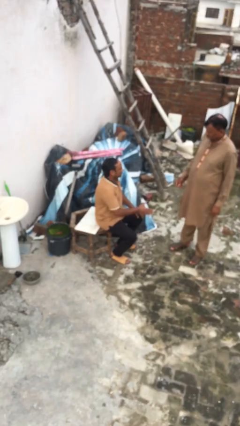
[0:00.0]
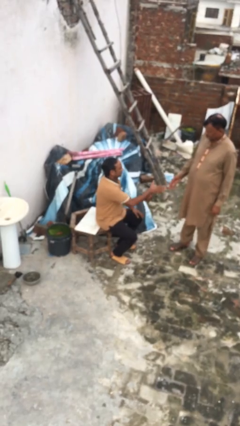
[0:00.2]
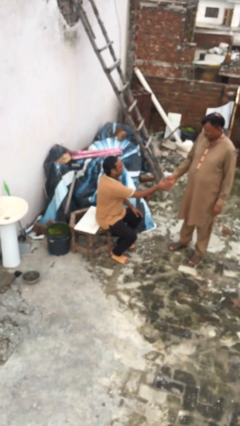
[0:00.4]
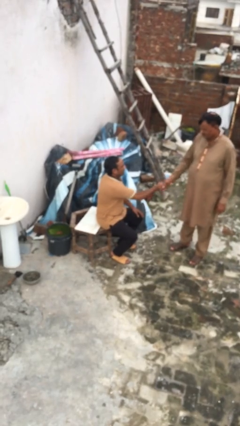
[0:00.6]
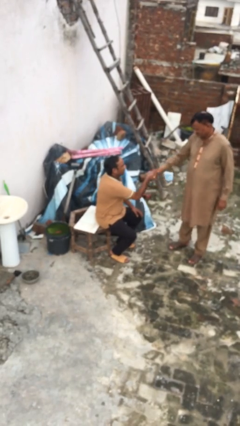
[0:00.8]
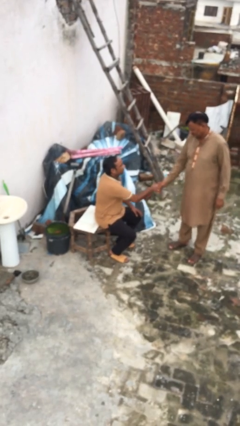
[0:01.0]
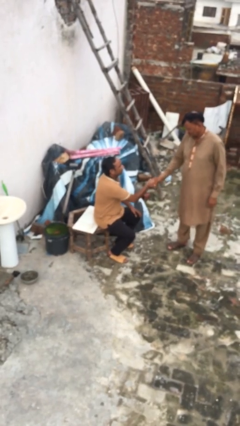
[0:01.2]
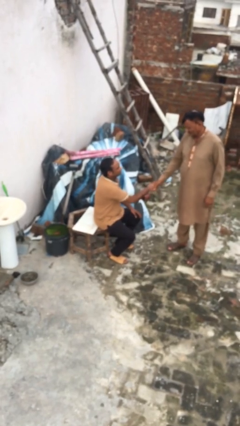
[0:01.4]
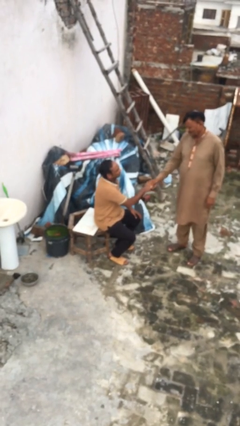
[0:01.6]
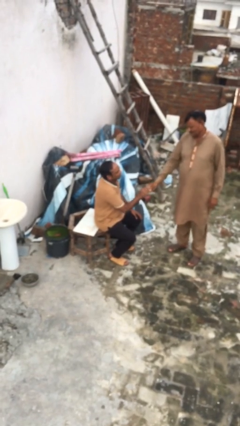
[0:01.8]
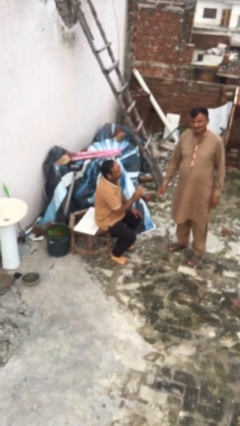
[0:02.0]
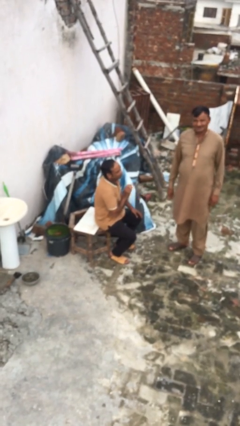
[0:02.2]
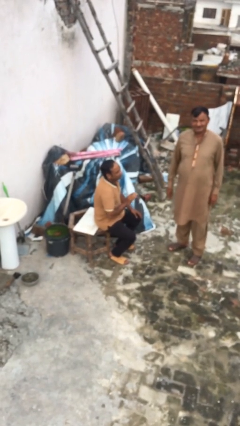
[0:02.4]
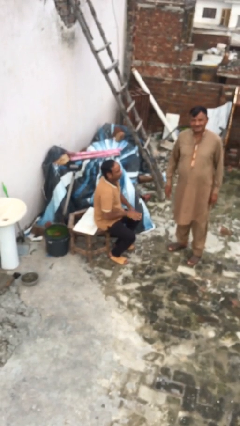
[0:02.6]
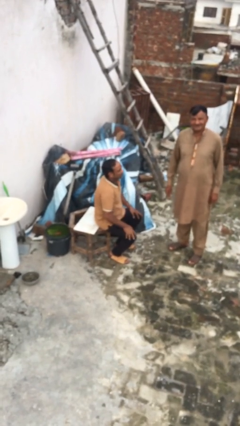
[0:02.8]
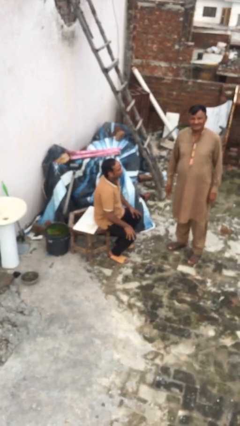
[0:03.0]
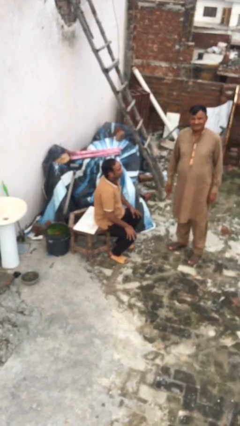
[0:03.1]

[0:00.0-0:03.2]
person shakes hand

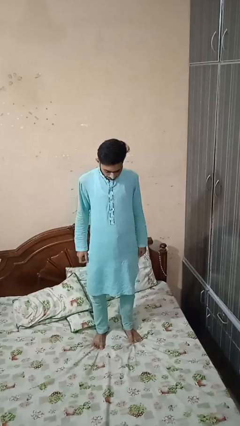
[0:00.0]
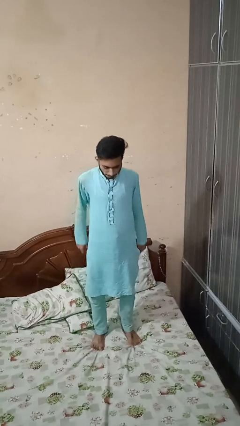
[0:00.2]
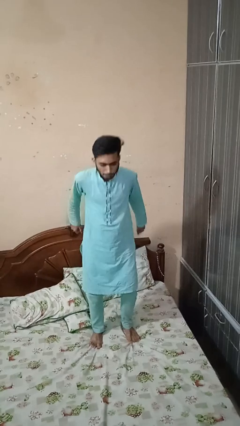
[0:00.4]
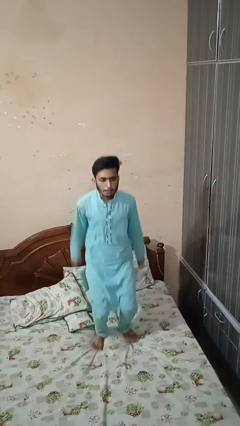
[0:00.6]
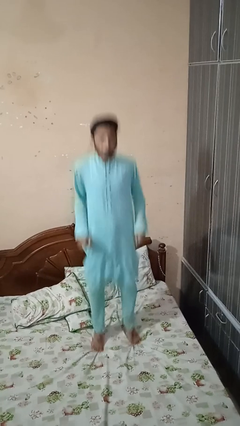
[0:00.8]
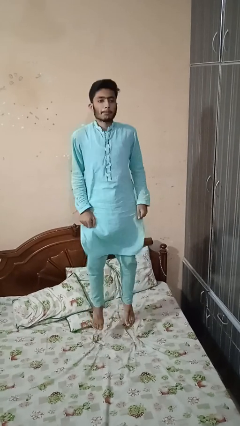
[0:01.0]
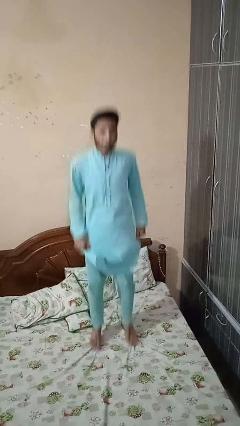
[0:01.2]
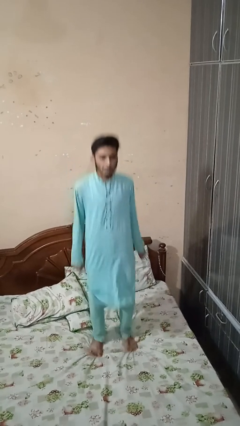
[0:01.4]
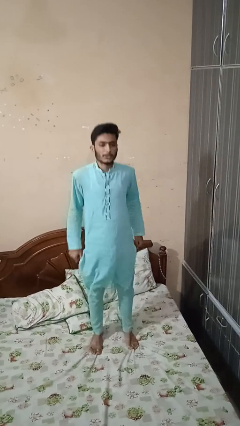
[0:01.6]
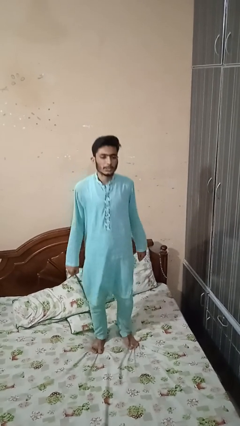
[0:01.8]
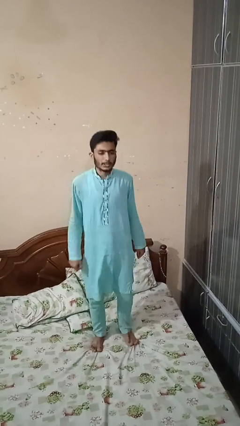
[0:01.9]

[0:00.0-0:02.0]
person jumps on bed

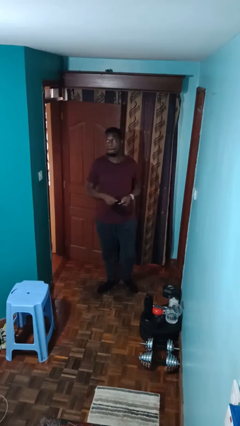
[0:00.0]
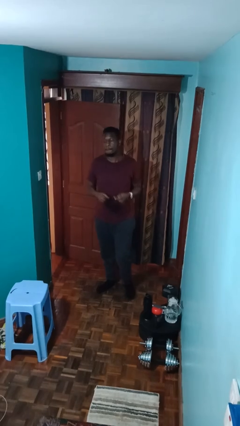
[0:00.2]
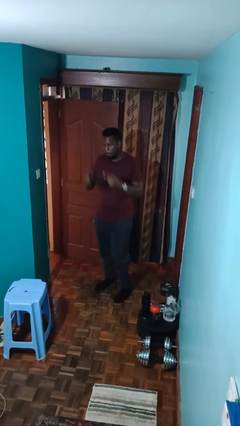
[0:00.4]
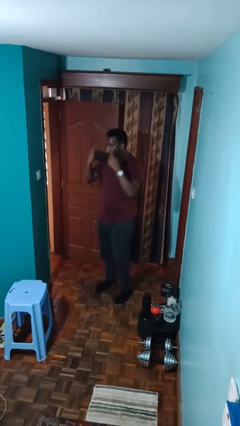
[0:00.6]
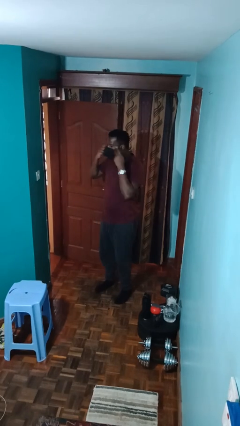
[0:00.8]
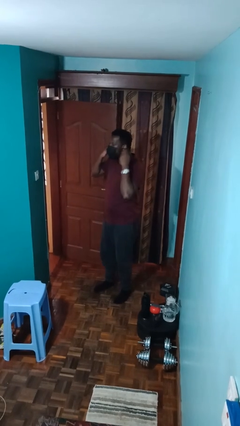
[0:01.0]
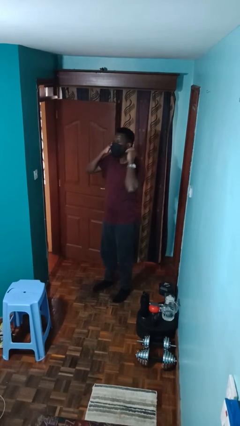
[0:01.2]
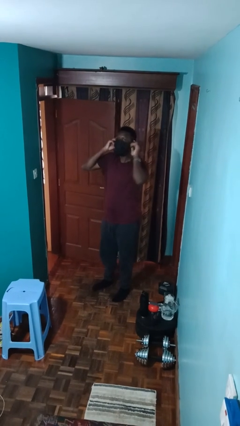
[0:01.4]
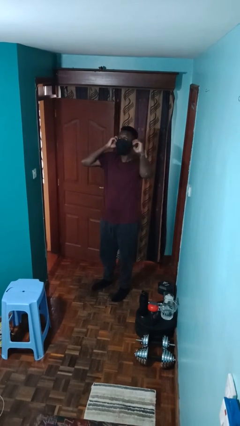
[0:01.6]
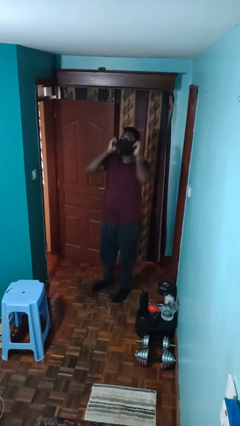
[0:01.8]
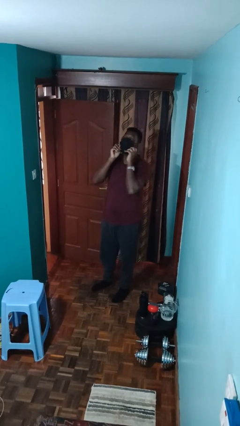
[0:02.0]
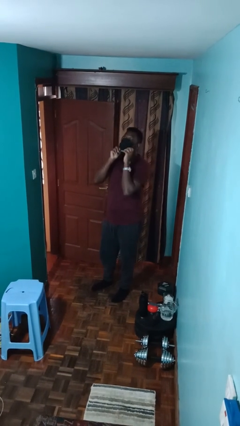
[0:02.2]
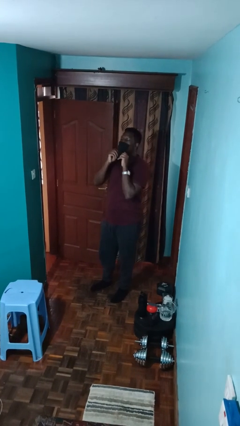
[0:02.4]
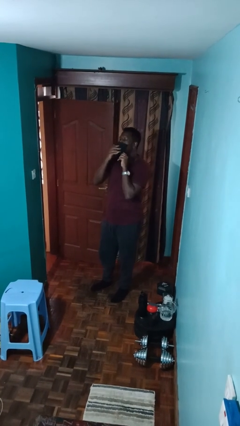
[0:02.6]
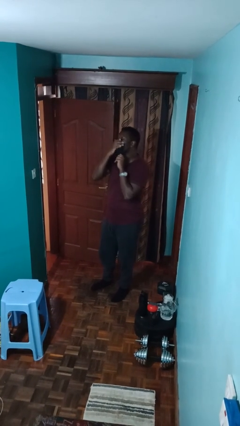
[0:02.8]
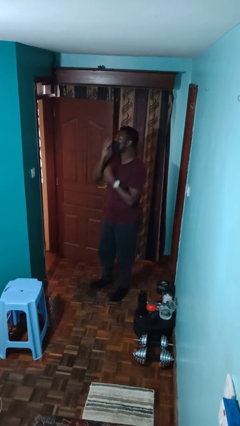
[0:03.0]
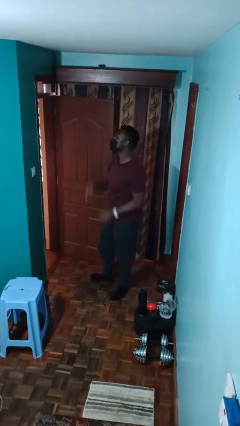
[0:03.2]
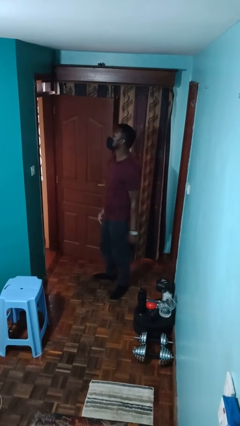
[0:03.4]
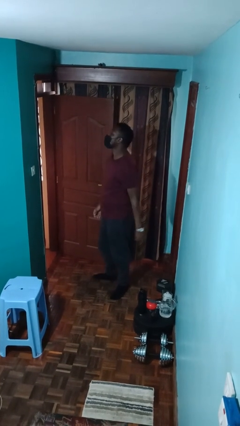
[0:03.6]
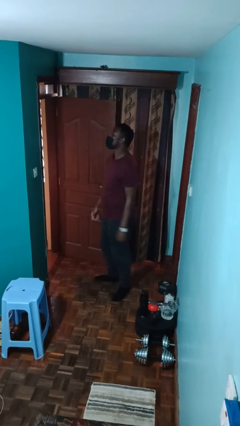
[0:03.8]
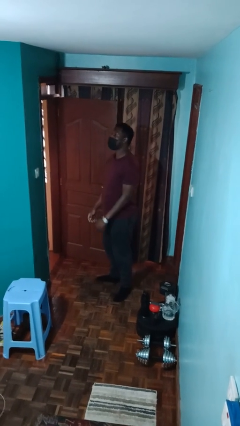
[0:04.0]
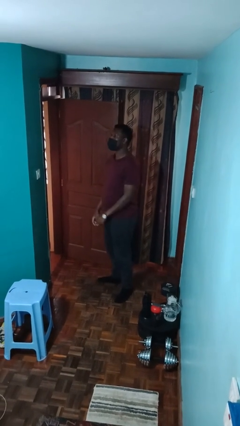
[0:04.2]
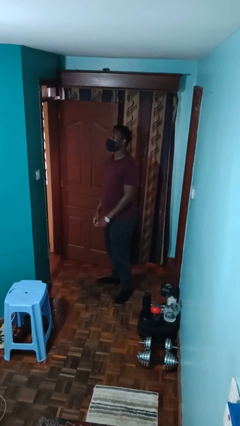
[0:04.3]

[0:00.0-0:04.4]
person puts on facemask

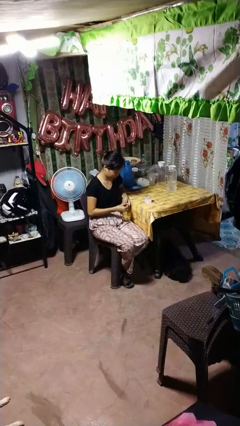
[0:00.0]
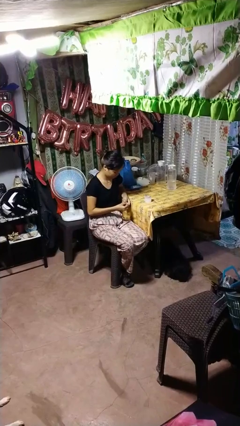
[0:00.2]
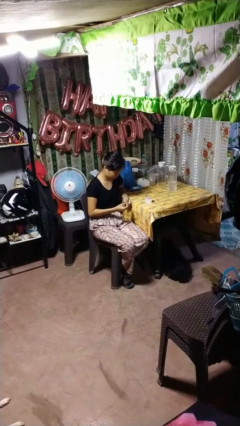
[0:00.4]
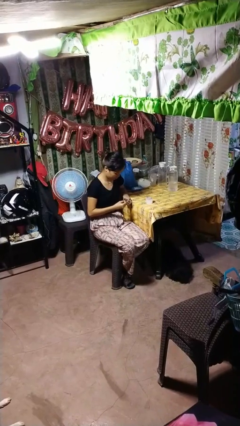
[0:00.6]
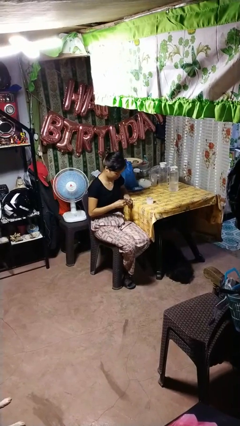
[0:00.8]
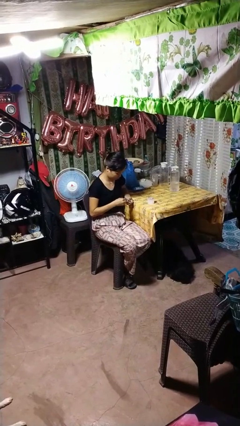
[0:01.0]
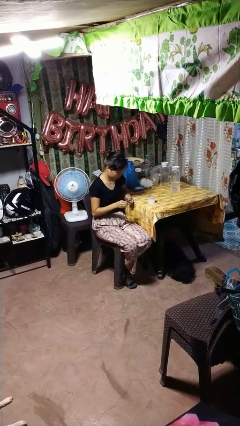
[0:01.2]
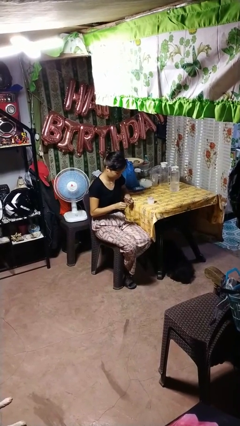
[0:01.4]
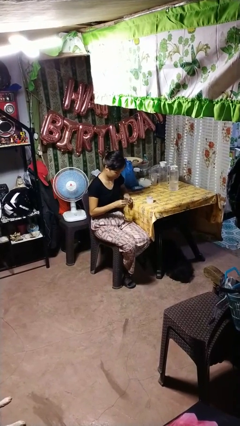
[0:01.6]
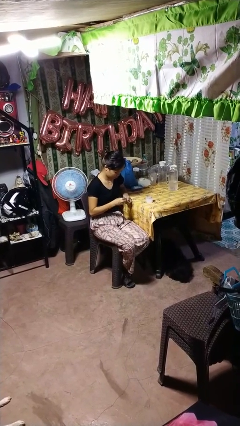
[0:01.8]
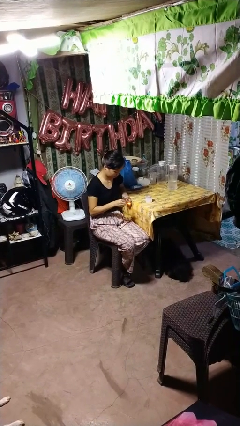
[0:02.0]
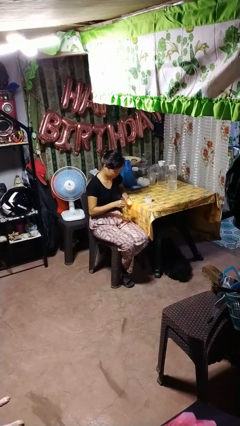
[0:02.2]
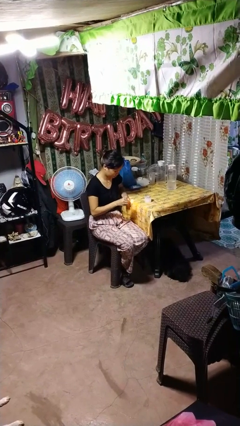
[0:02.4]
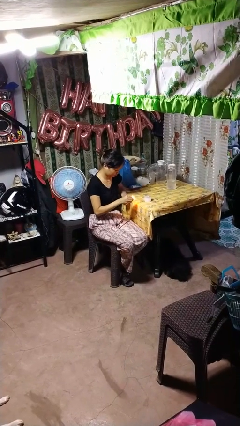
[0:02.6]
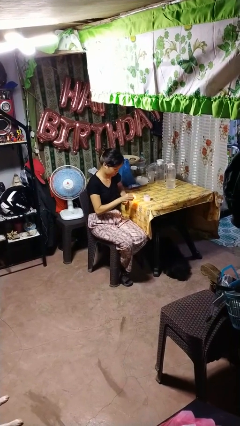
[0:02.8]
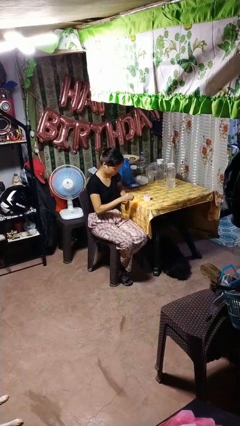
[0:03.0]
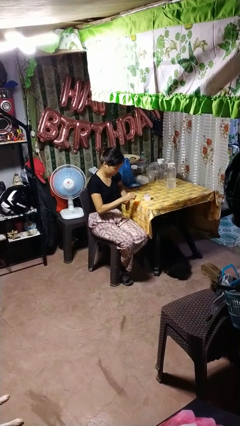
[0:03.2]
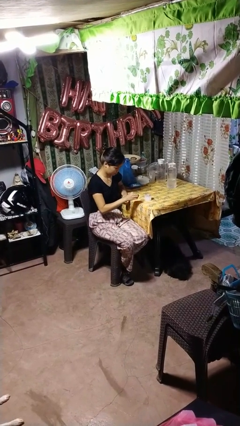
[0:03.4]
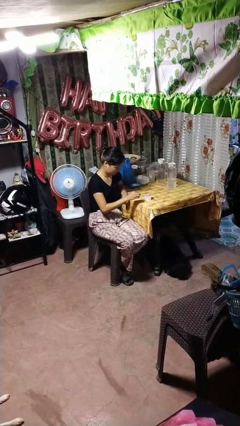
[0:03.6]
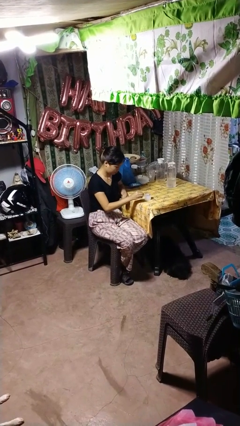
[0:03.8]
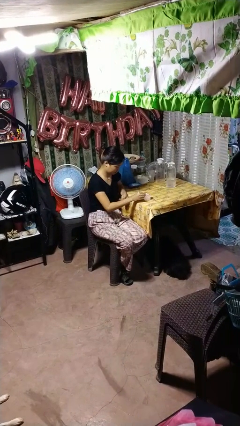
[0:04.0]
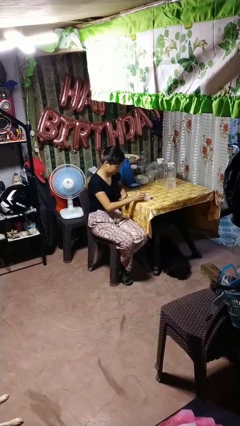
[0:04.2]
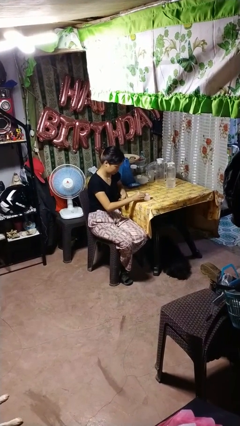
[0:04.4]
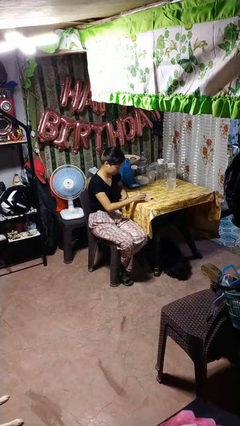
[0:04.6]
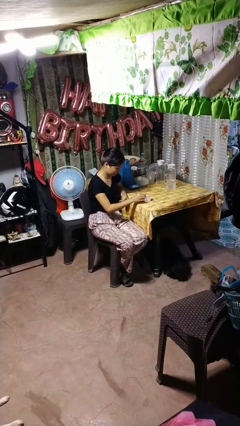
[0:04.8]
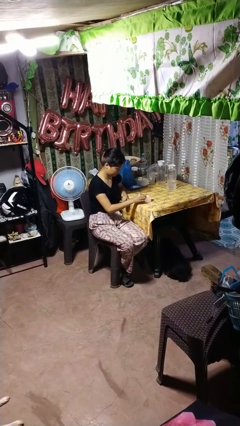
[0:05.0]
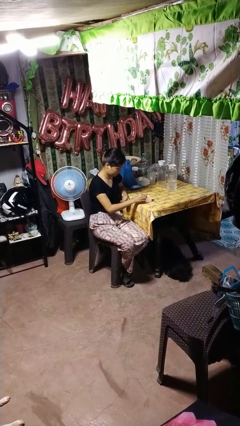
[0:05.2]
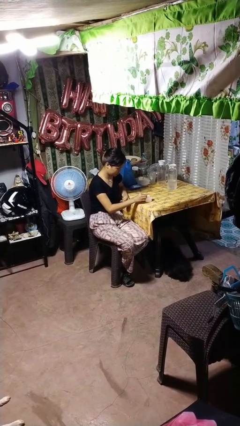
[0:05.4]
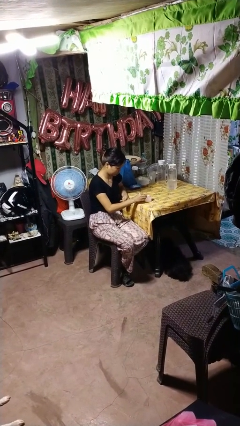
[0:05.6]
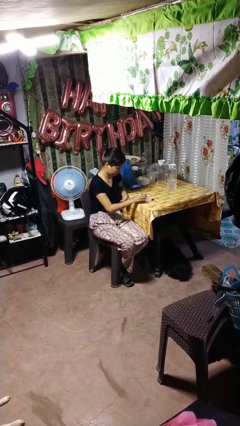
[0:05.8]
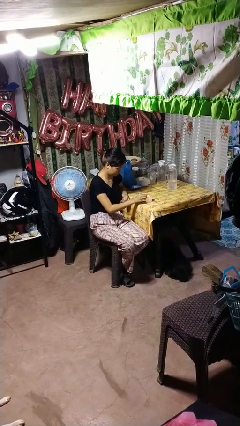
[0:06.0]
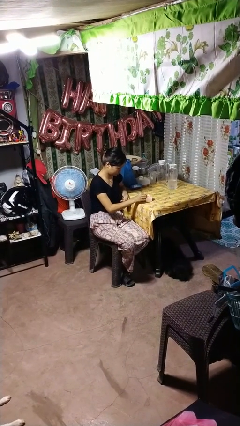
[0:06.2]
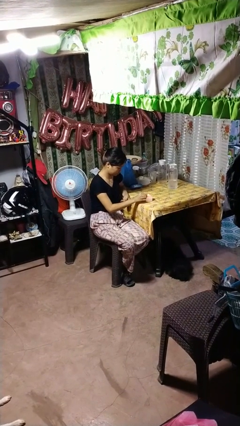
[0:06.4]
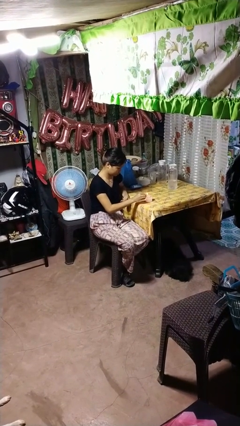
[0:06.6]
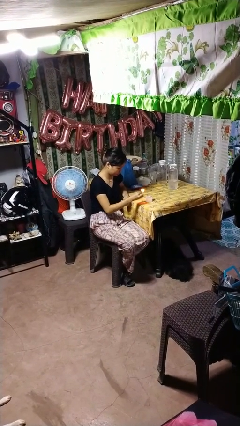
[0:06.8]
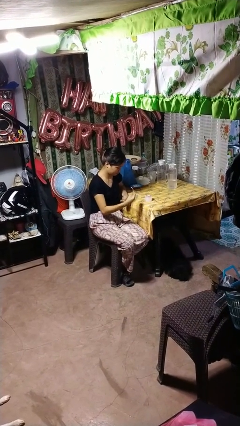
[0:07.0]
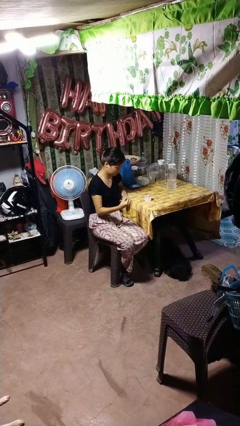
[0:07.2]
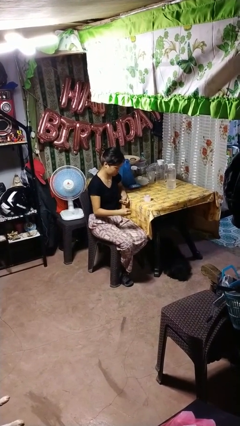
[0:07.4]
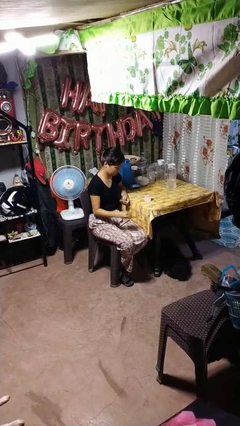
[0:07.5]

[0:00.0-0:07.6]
person lights candle

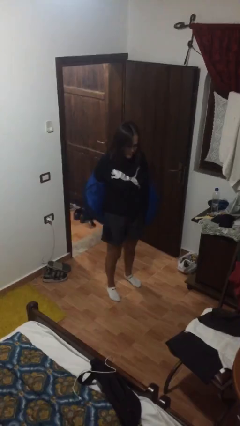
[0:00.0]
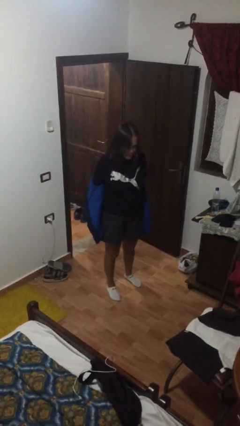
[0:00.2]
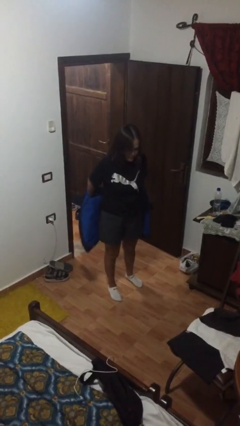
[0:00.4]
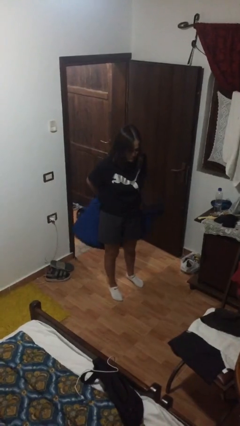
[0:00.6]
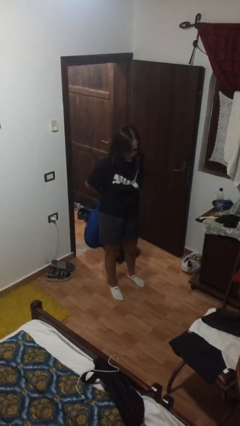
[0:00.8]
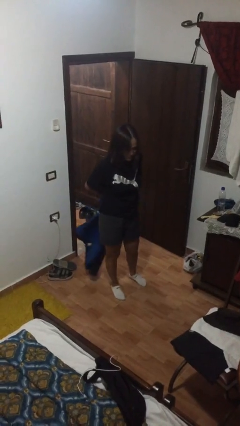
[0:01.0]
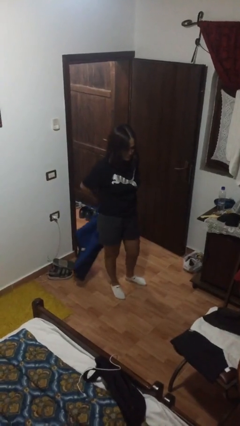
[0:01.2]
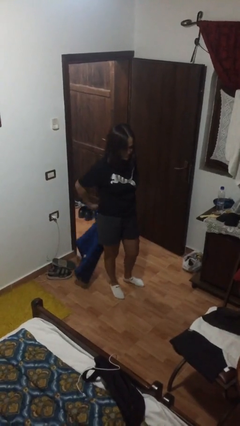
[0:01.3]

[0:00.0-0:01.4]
person takes off jacket
